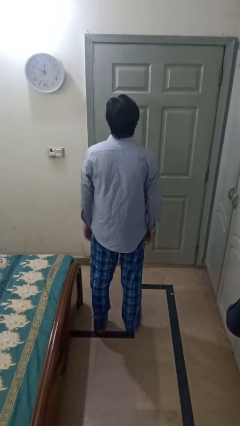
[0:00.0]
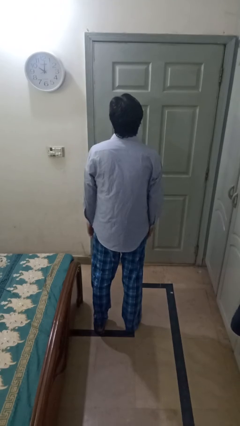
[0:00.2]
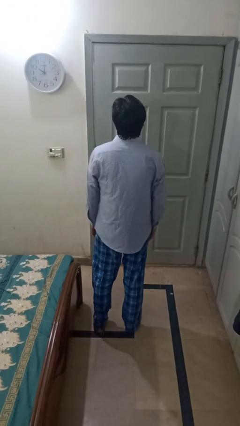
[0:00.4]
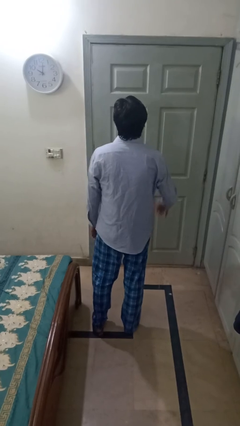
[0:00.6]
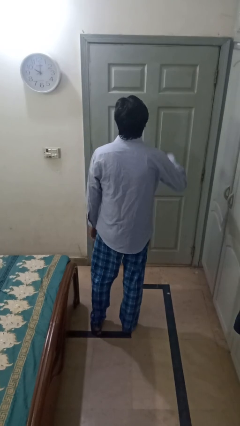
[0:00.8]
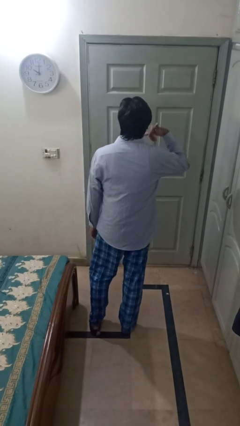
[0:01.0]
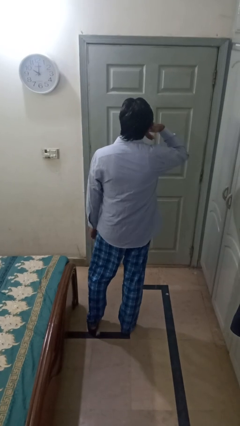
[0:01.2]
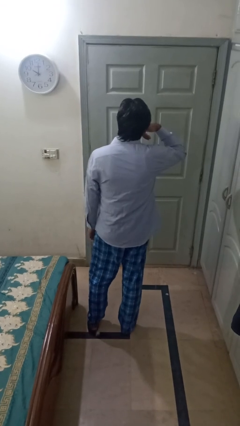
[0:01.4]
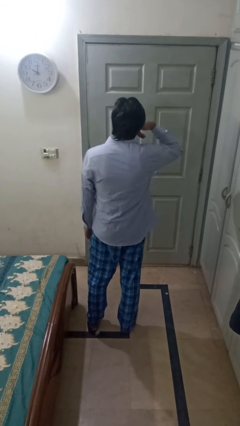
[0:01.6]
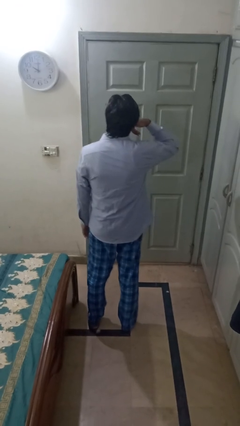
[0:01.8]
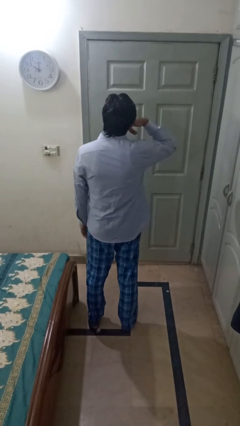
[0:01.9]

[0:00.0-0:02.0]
person gestures call me

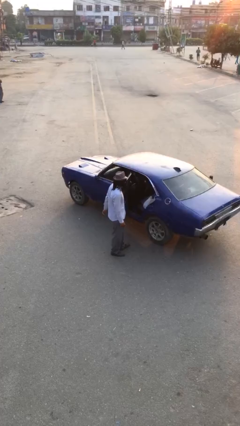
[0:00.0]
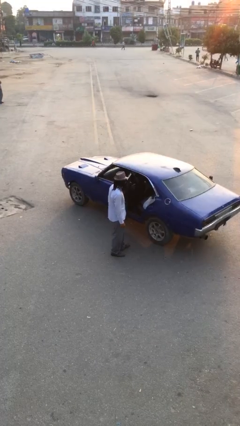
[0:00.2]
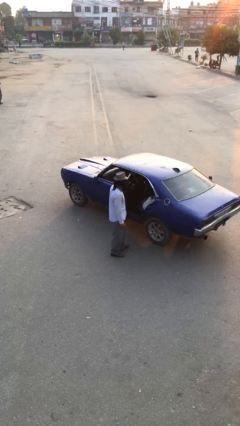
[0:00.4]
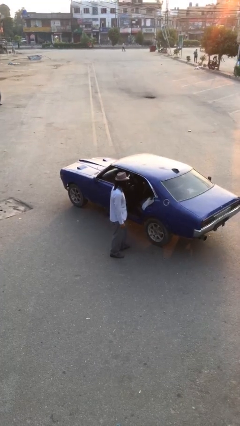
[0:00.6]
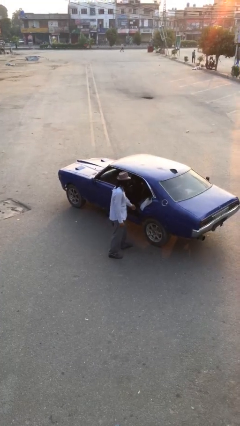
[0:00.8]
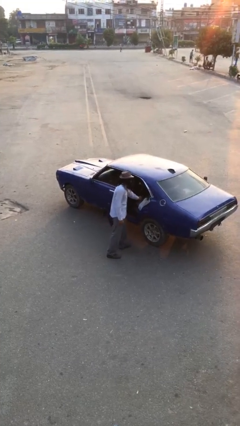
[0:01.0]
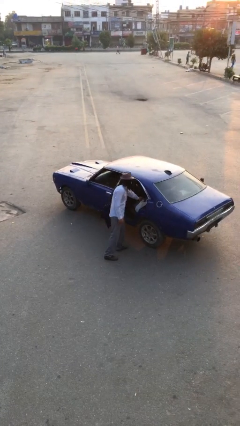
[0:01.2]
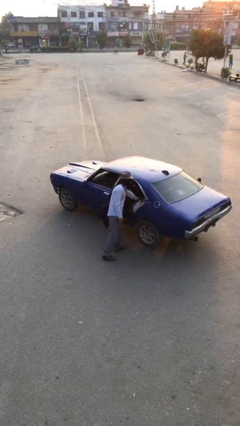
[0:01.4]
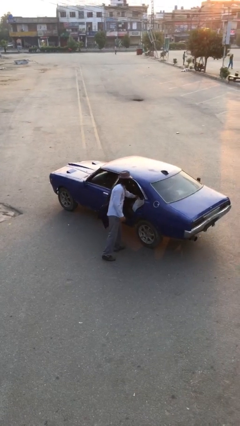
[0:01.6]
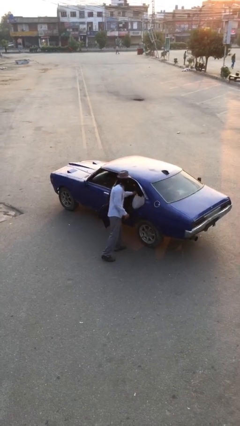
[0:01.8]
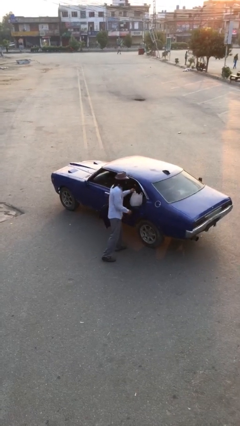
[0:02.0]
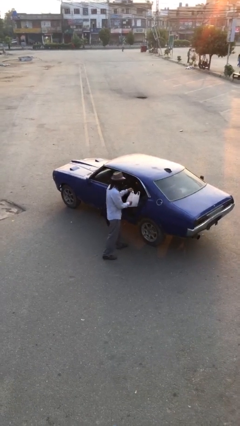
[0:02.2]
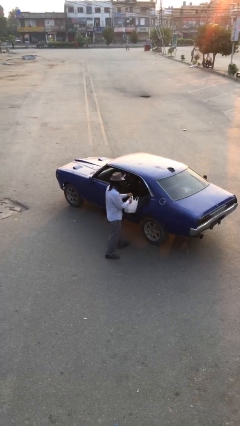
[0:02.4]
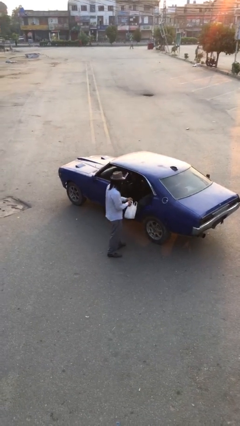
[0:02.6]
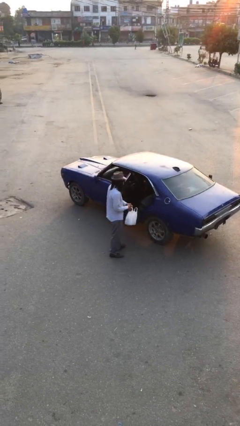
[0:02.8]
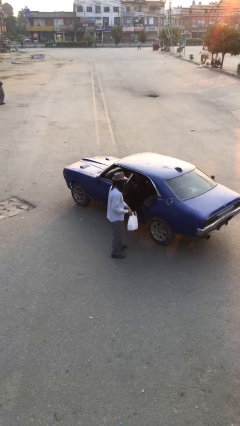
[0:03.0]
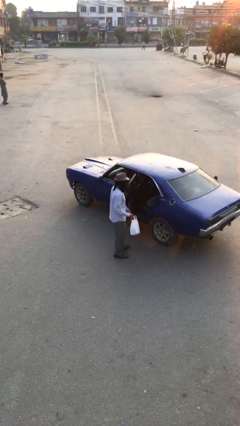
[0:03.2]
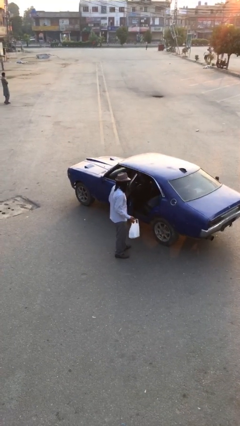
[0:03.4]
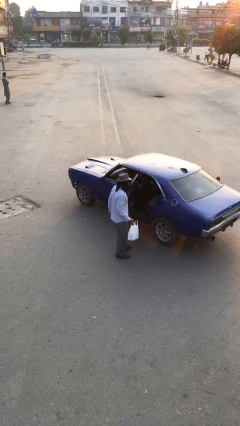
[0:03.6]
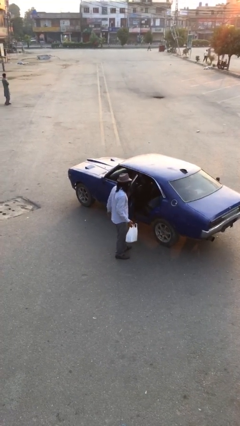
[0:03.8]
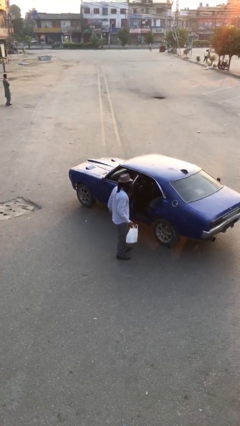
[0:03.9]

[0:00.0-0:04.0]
person unloads car

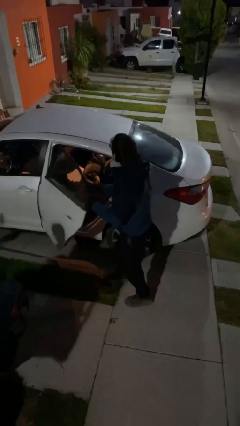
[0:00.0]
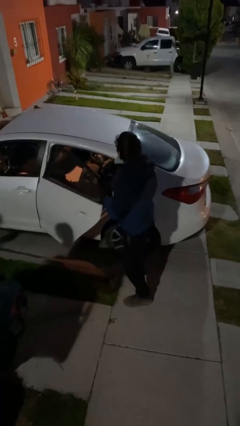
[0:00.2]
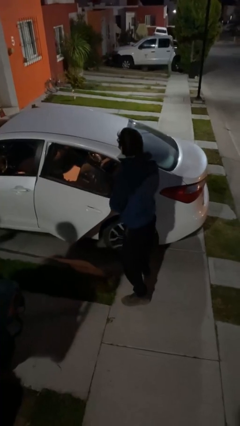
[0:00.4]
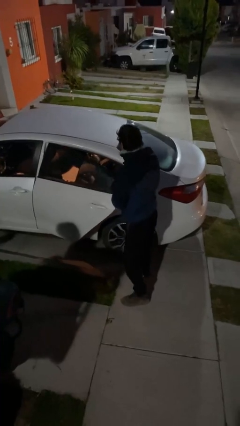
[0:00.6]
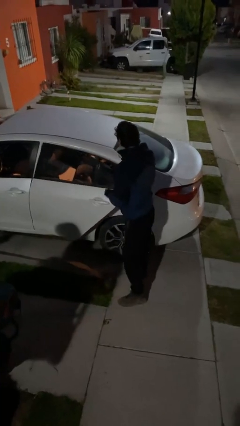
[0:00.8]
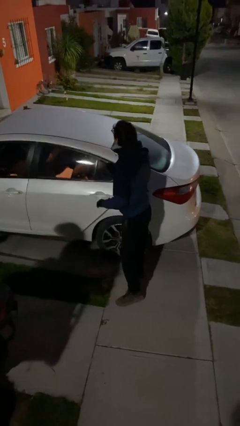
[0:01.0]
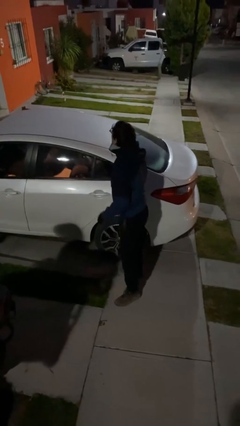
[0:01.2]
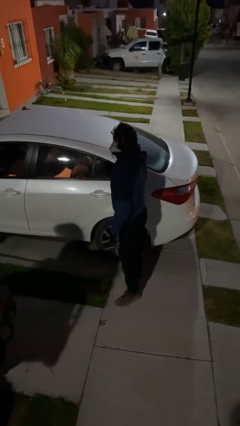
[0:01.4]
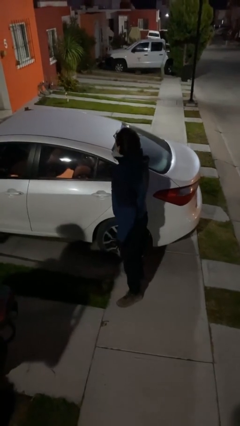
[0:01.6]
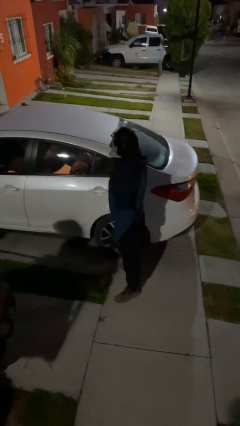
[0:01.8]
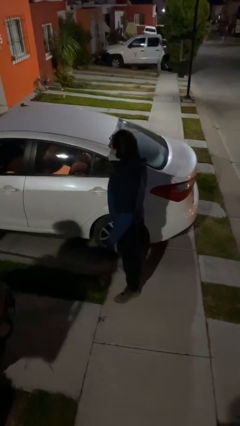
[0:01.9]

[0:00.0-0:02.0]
person closes car door

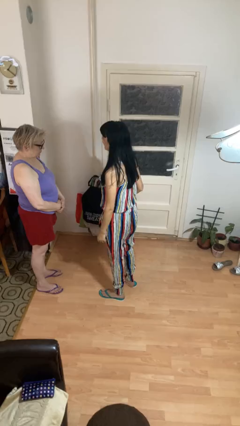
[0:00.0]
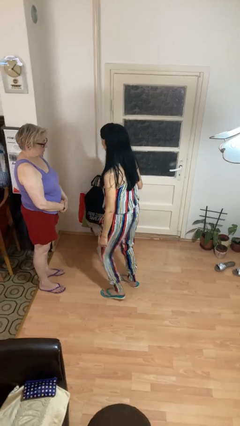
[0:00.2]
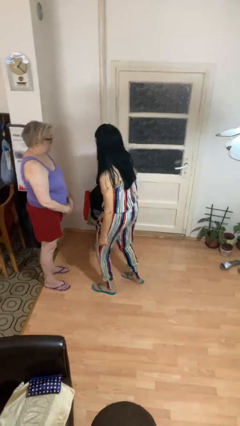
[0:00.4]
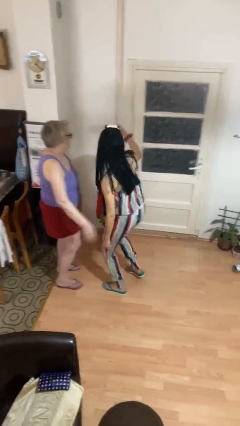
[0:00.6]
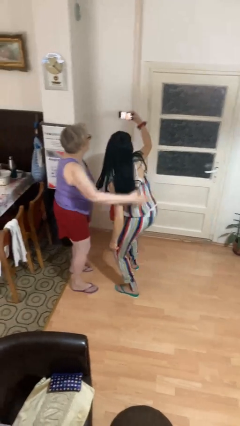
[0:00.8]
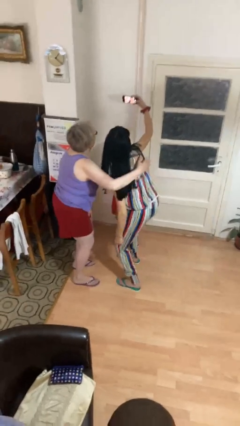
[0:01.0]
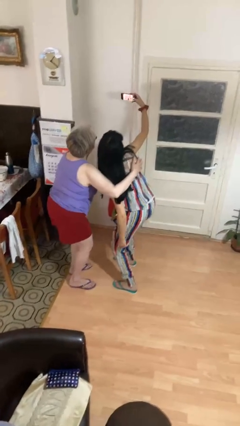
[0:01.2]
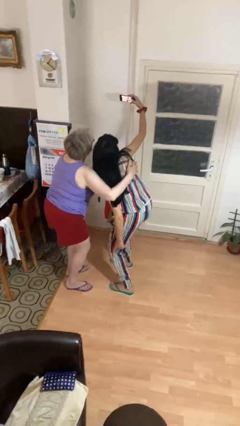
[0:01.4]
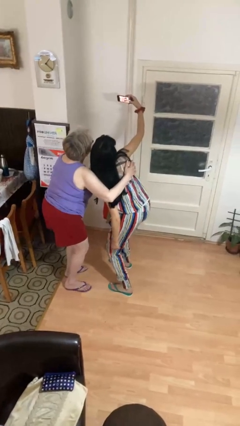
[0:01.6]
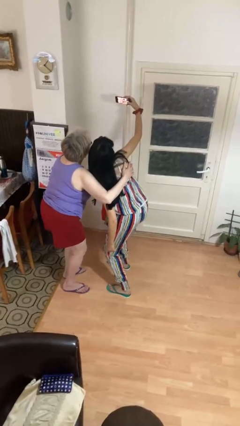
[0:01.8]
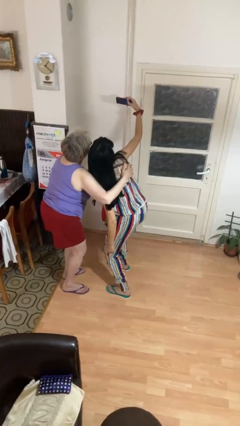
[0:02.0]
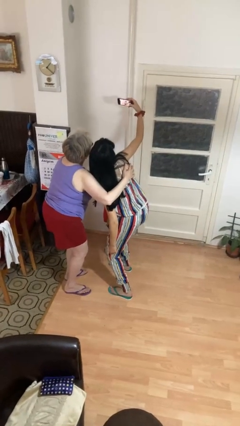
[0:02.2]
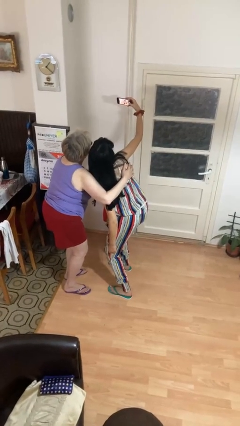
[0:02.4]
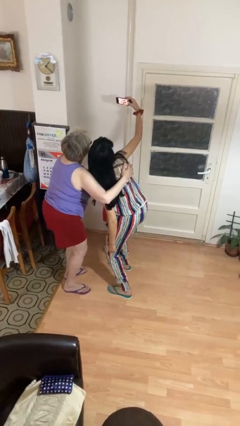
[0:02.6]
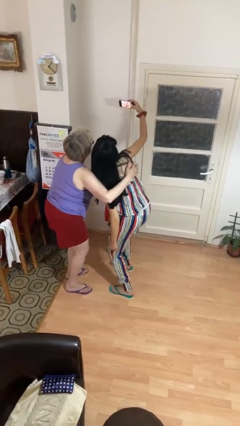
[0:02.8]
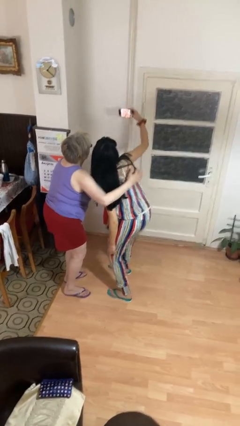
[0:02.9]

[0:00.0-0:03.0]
person takes selfie with person

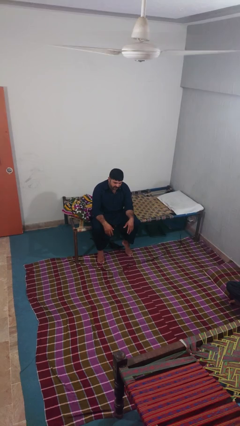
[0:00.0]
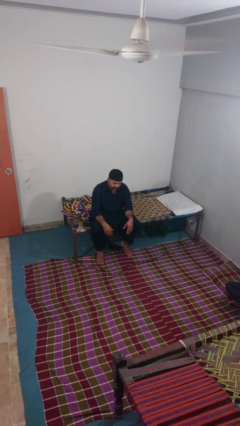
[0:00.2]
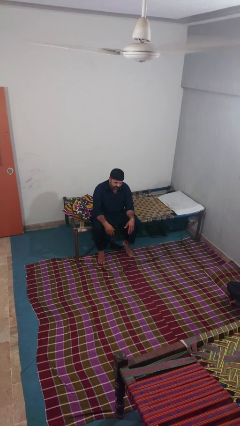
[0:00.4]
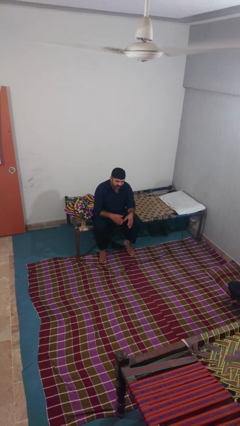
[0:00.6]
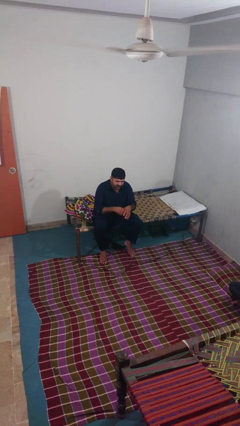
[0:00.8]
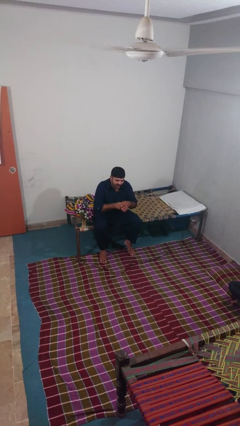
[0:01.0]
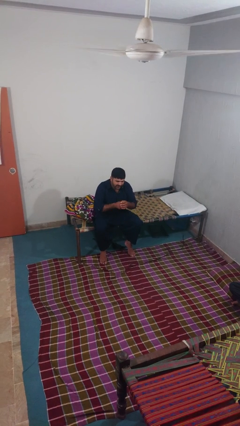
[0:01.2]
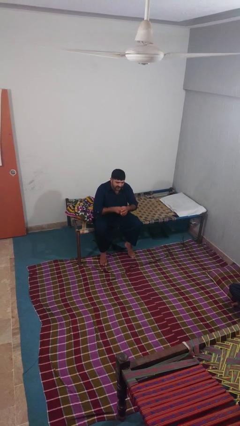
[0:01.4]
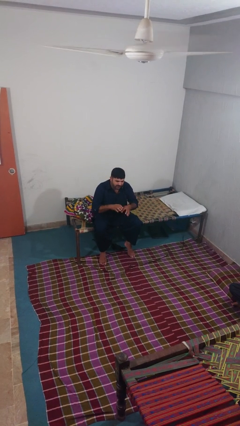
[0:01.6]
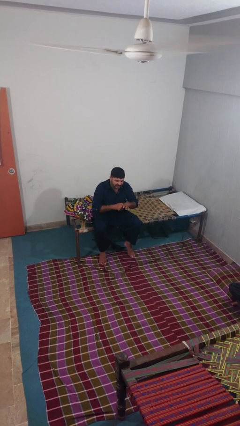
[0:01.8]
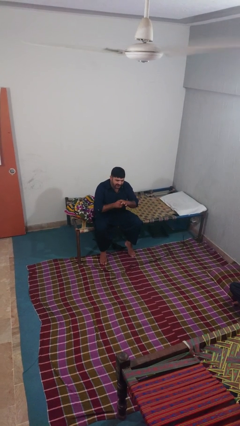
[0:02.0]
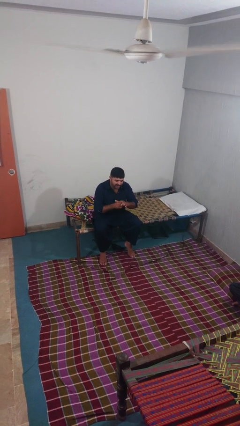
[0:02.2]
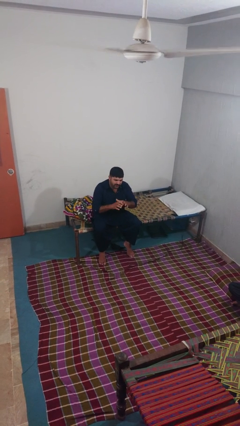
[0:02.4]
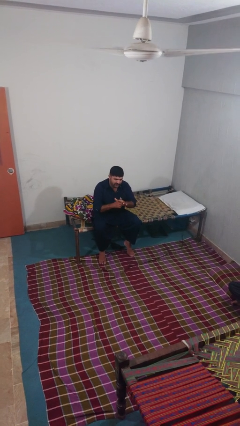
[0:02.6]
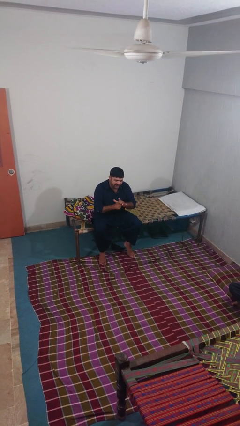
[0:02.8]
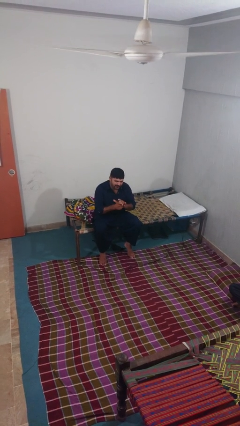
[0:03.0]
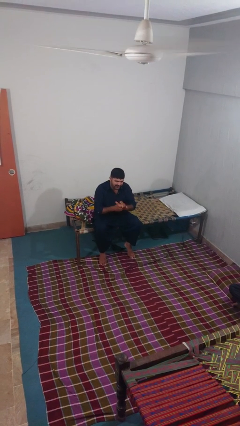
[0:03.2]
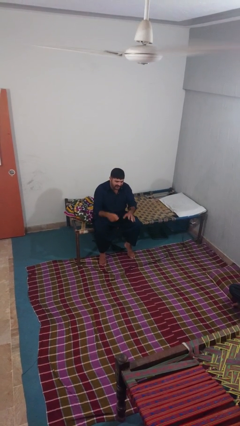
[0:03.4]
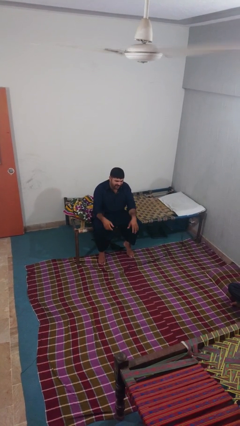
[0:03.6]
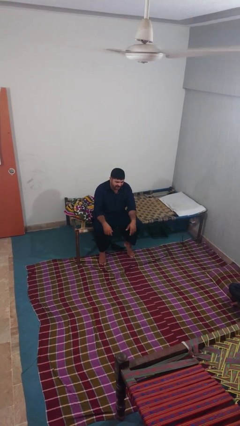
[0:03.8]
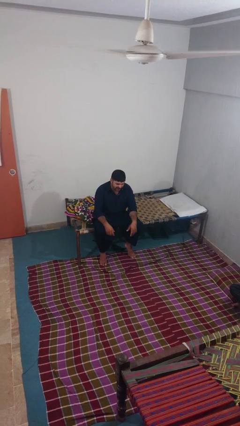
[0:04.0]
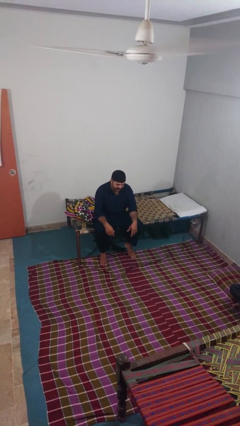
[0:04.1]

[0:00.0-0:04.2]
person cracks knuckles

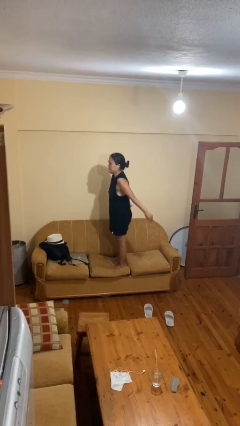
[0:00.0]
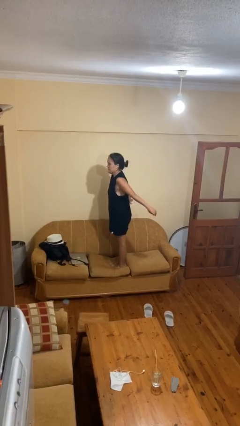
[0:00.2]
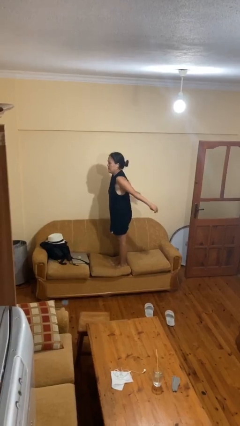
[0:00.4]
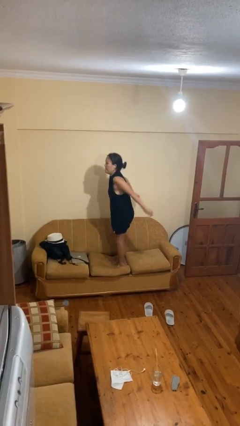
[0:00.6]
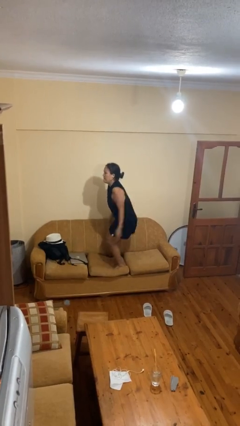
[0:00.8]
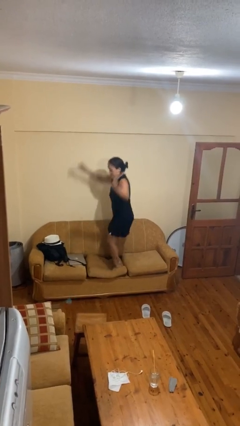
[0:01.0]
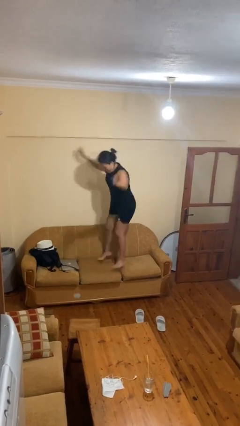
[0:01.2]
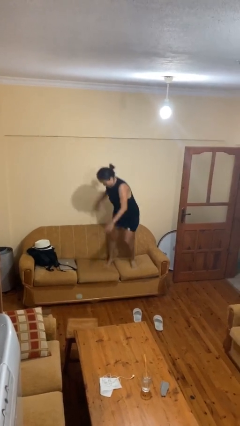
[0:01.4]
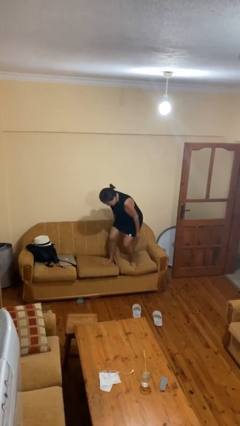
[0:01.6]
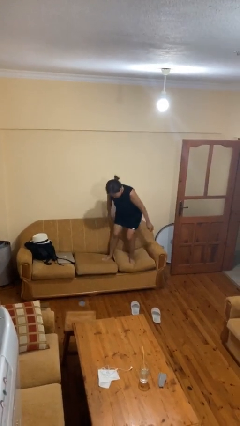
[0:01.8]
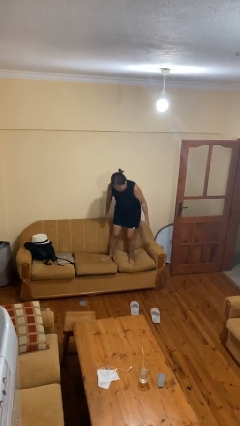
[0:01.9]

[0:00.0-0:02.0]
person jumps on couch
